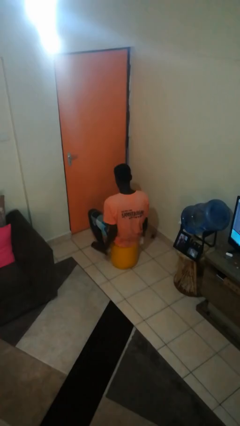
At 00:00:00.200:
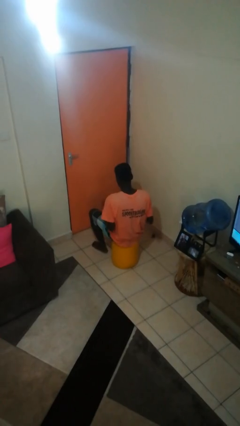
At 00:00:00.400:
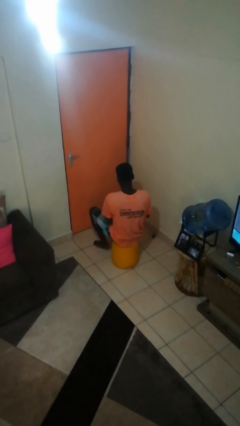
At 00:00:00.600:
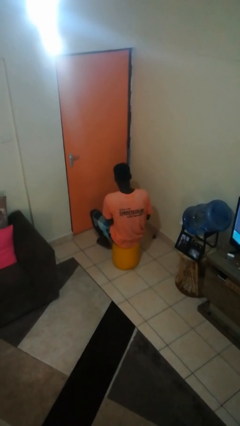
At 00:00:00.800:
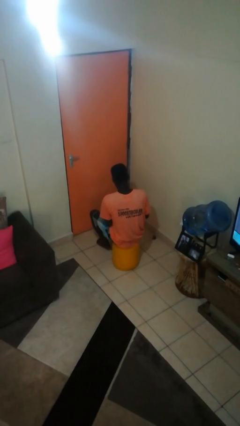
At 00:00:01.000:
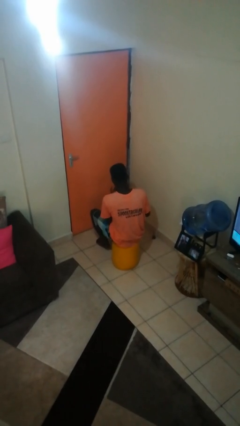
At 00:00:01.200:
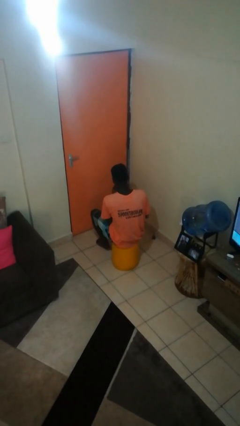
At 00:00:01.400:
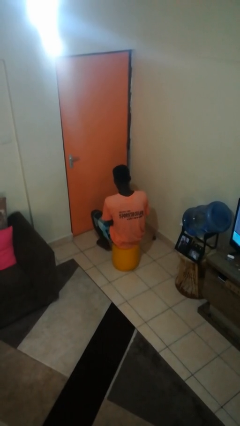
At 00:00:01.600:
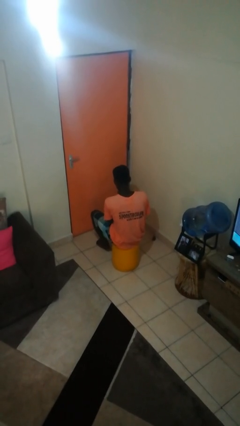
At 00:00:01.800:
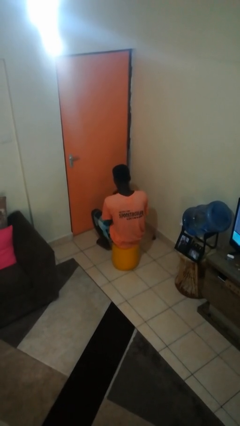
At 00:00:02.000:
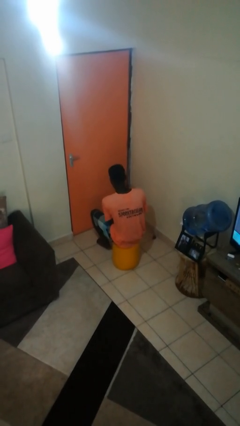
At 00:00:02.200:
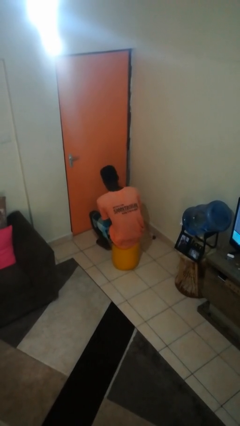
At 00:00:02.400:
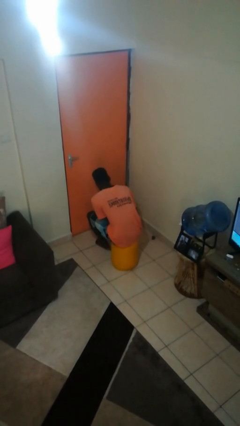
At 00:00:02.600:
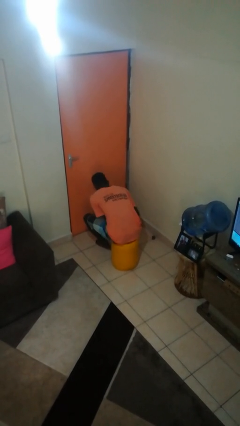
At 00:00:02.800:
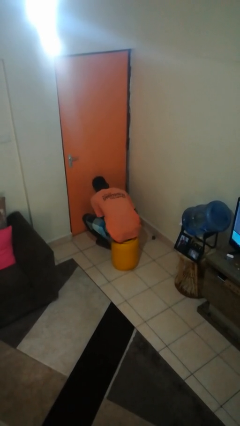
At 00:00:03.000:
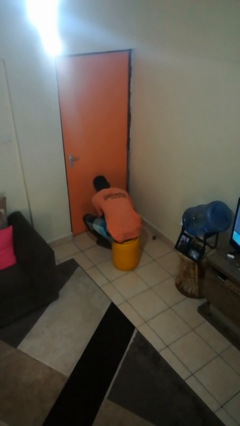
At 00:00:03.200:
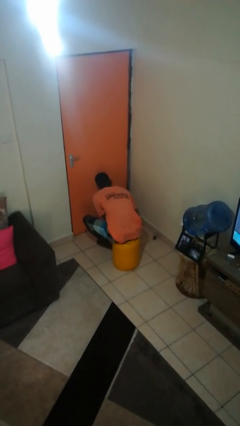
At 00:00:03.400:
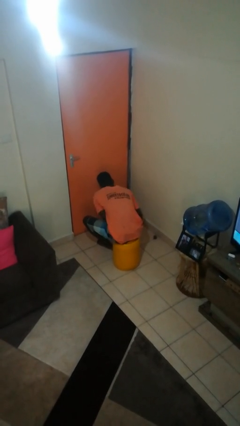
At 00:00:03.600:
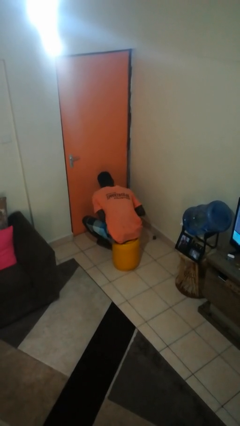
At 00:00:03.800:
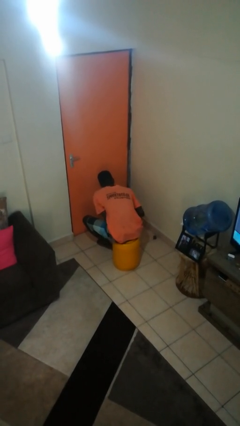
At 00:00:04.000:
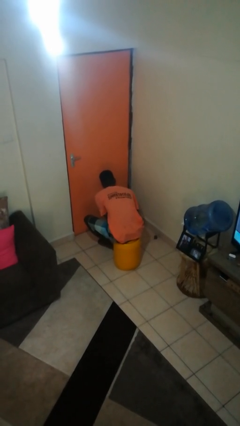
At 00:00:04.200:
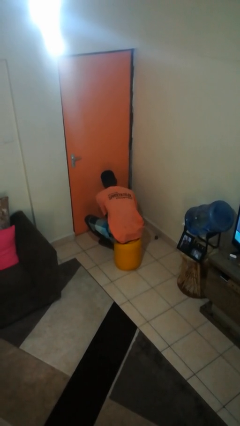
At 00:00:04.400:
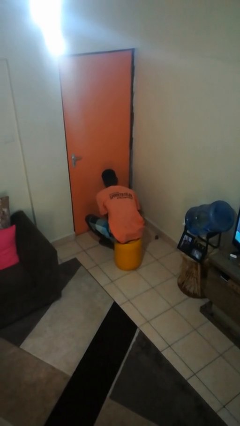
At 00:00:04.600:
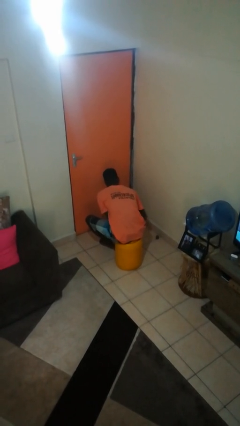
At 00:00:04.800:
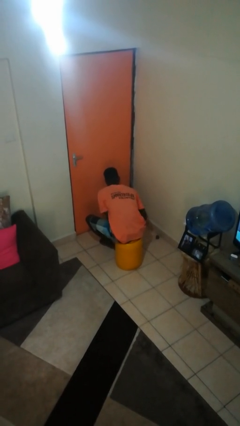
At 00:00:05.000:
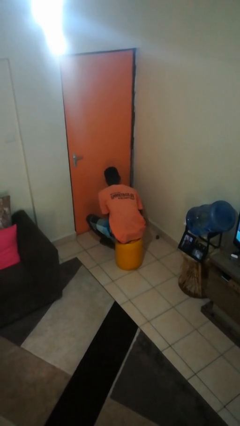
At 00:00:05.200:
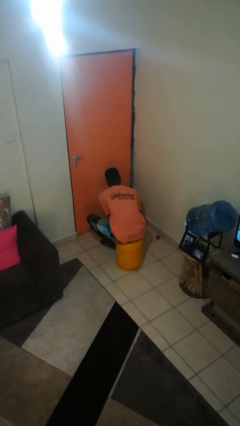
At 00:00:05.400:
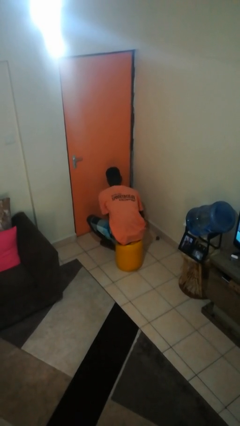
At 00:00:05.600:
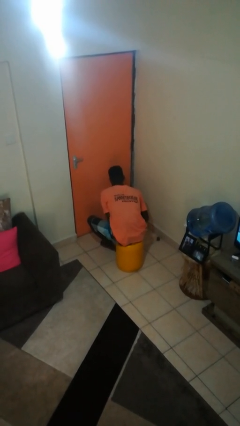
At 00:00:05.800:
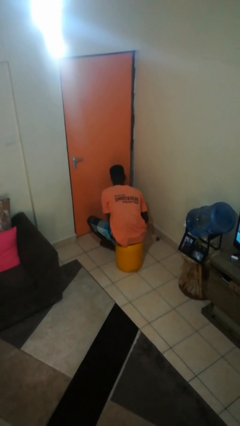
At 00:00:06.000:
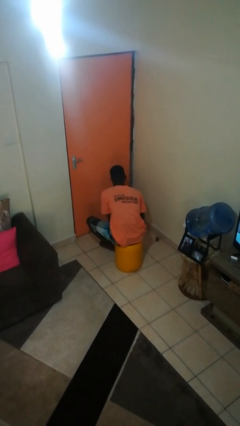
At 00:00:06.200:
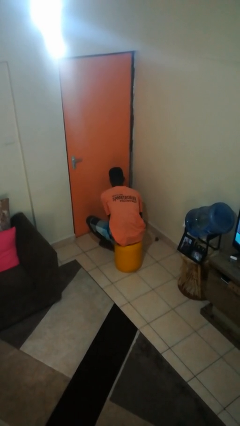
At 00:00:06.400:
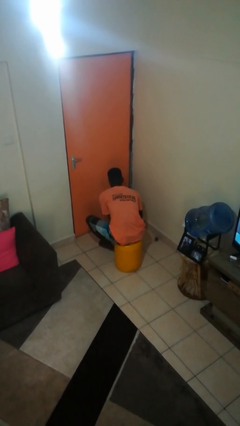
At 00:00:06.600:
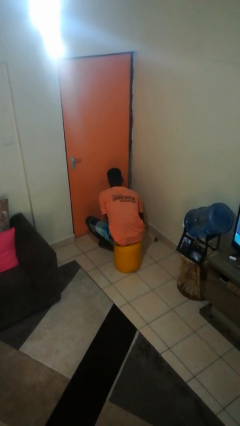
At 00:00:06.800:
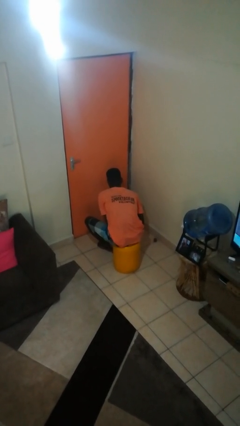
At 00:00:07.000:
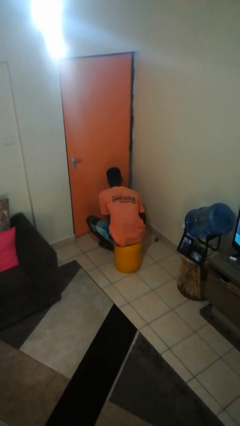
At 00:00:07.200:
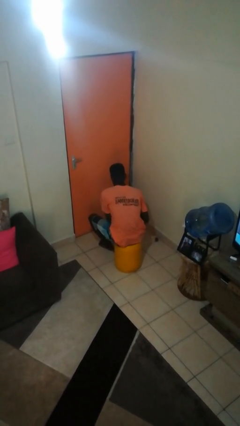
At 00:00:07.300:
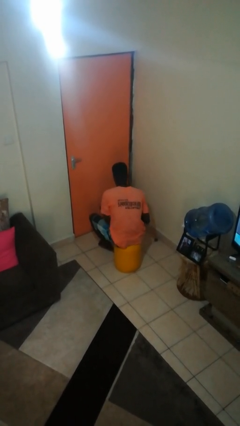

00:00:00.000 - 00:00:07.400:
person applies sunscreen

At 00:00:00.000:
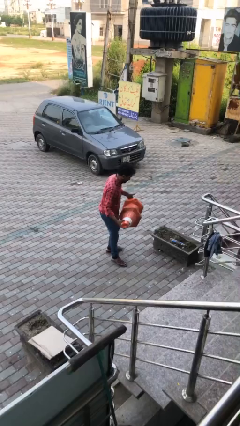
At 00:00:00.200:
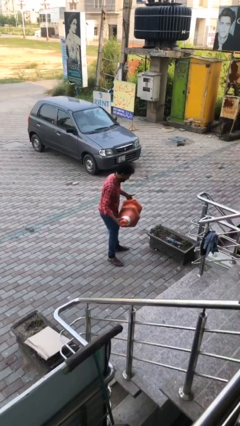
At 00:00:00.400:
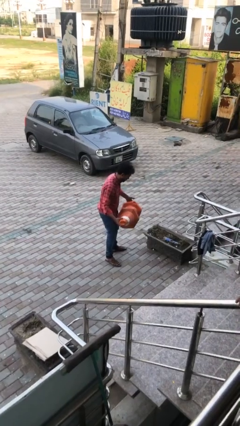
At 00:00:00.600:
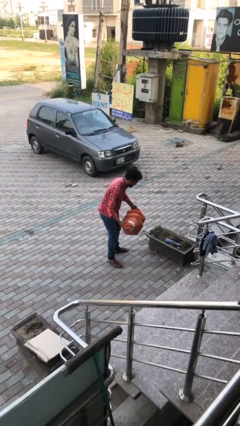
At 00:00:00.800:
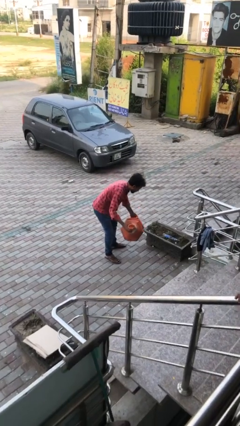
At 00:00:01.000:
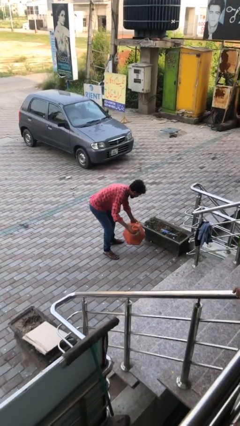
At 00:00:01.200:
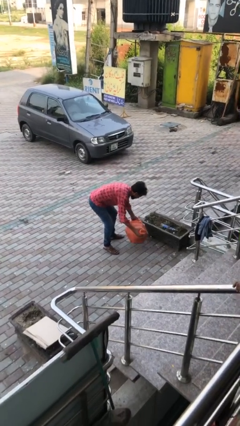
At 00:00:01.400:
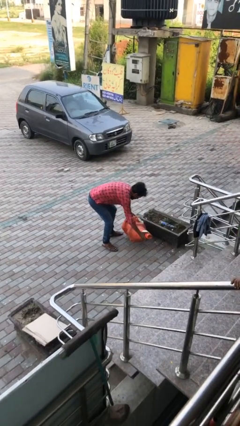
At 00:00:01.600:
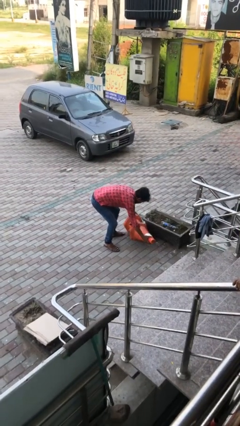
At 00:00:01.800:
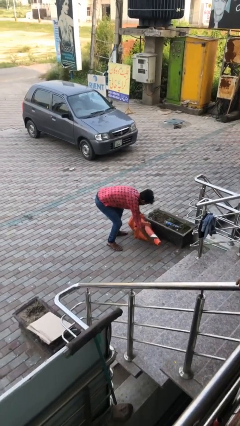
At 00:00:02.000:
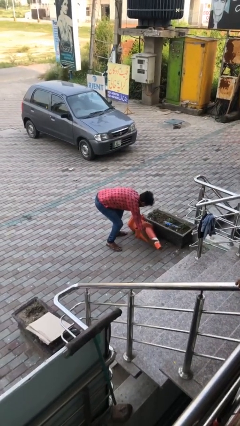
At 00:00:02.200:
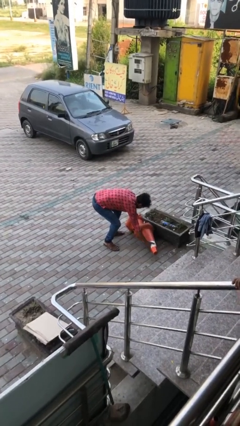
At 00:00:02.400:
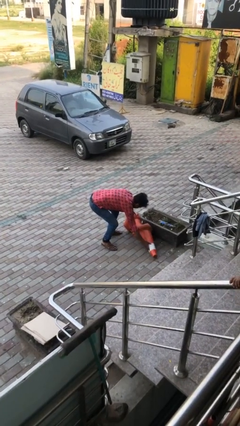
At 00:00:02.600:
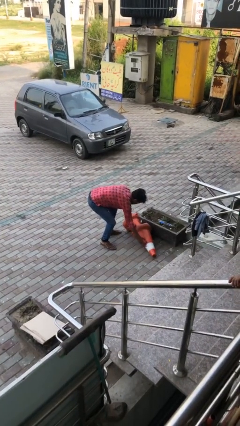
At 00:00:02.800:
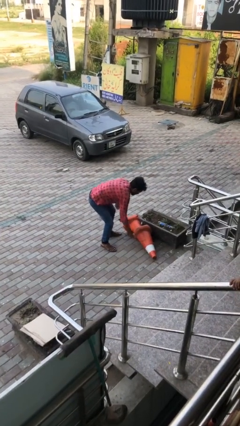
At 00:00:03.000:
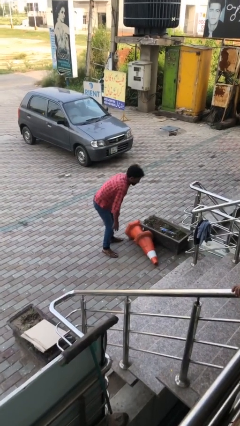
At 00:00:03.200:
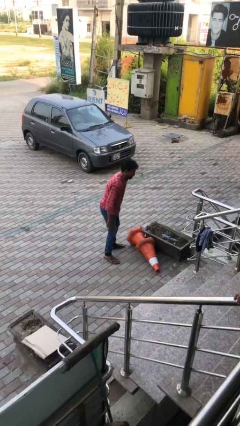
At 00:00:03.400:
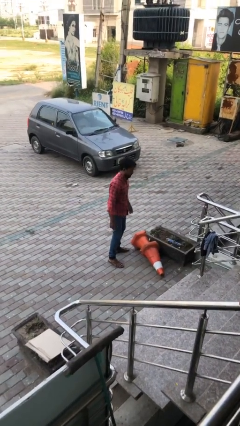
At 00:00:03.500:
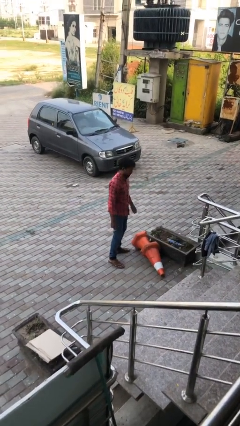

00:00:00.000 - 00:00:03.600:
person puts down object on floor

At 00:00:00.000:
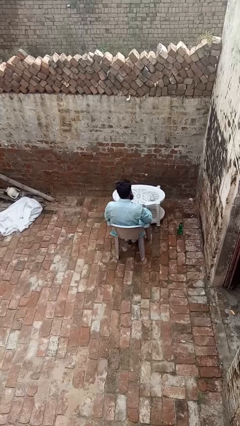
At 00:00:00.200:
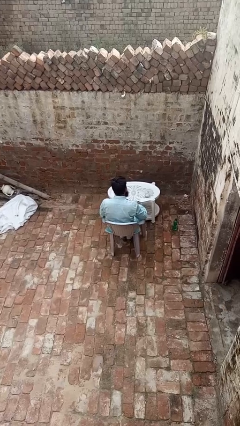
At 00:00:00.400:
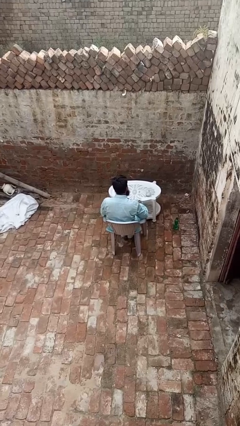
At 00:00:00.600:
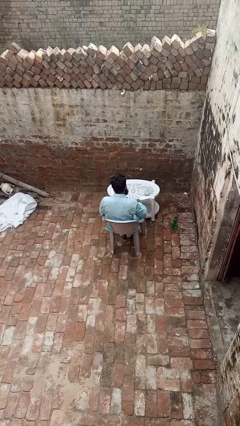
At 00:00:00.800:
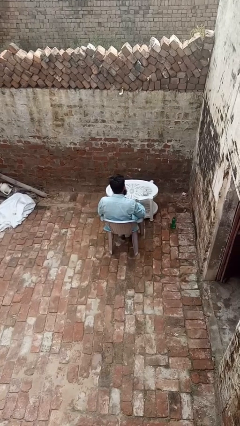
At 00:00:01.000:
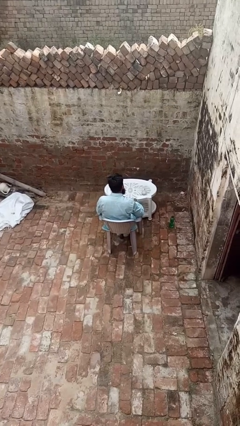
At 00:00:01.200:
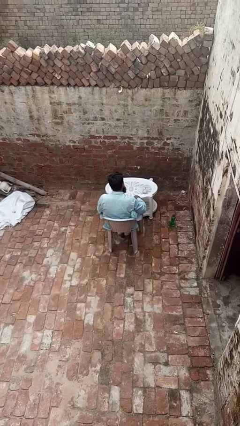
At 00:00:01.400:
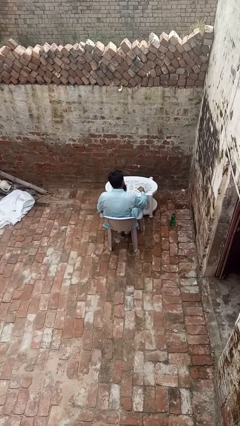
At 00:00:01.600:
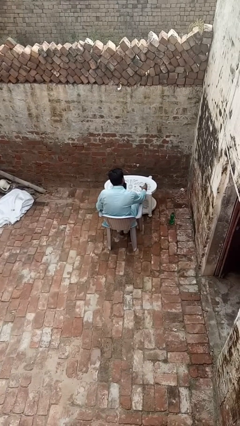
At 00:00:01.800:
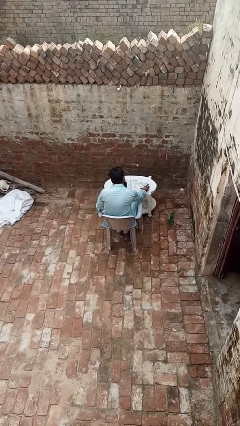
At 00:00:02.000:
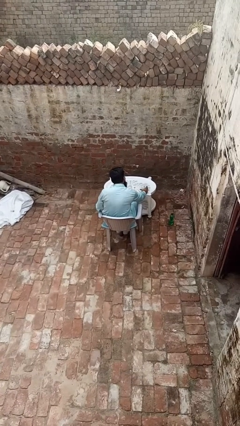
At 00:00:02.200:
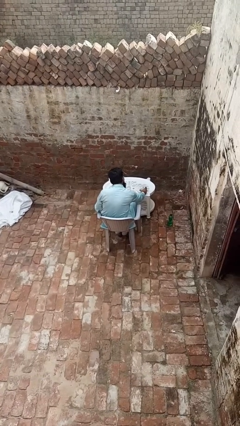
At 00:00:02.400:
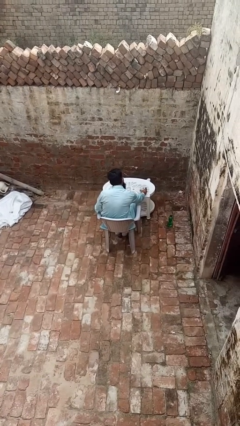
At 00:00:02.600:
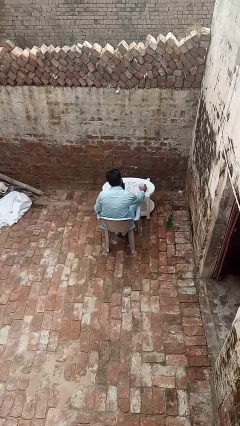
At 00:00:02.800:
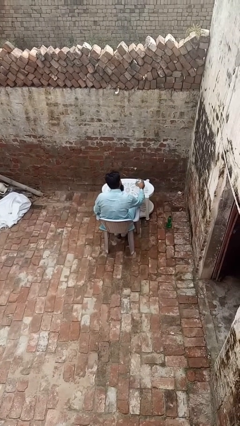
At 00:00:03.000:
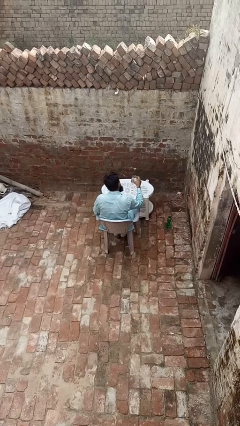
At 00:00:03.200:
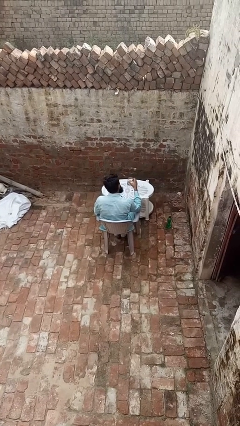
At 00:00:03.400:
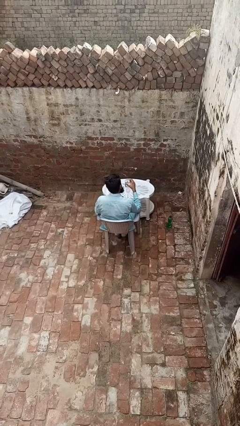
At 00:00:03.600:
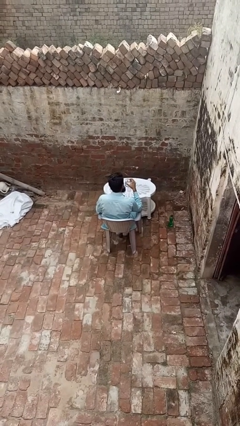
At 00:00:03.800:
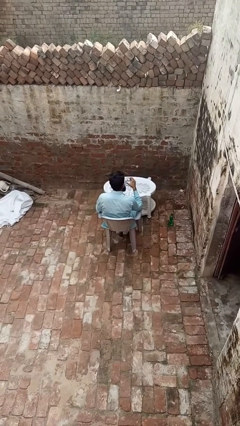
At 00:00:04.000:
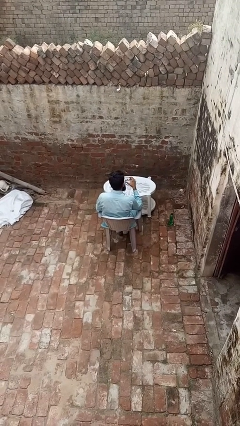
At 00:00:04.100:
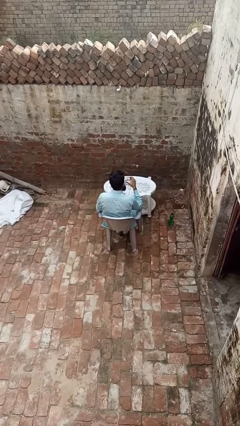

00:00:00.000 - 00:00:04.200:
person picks up object from table

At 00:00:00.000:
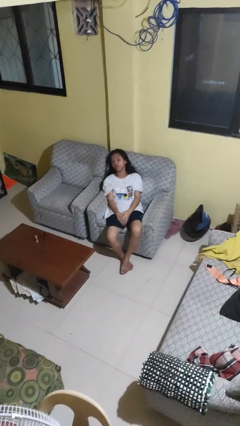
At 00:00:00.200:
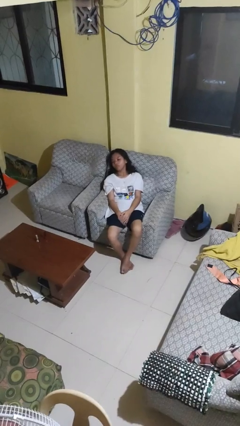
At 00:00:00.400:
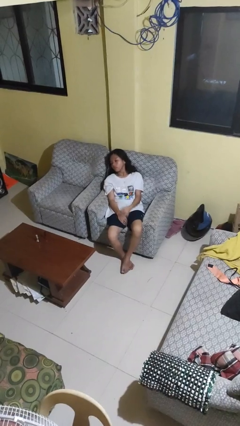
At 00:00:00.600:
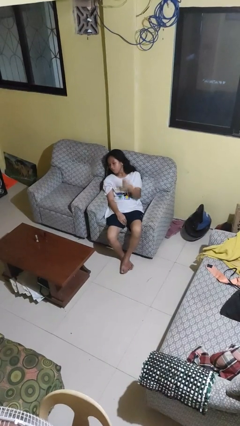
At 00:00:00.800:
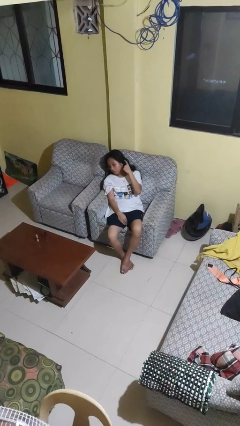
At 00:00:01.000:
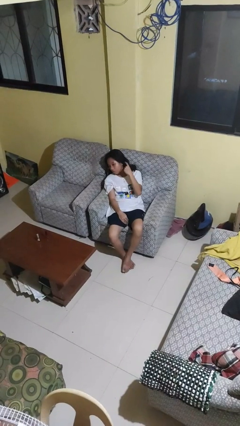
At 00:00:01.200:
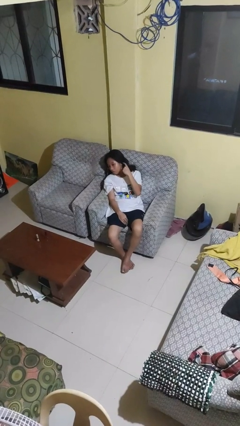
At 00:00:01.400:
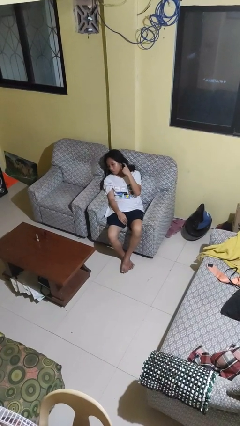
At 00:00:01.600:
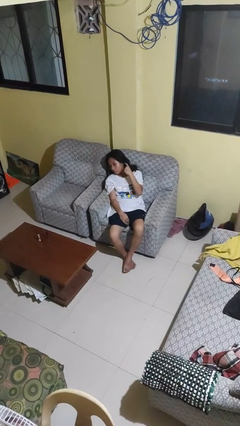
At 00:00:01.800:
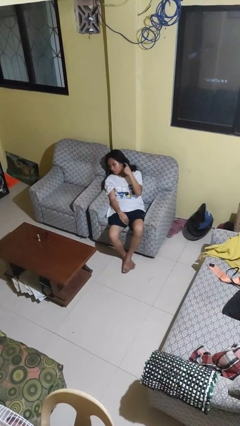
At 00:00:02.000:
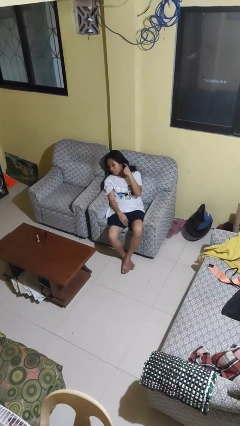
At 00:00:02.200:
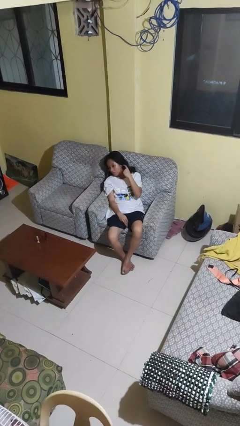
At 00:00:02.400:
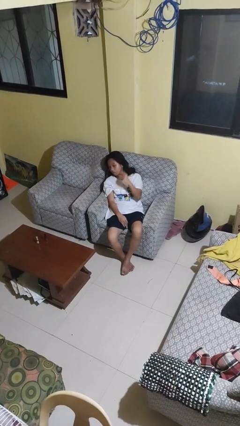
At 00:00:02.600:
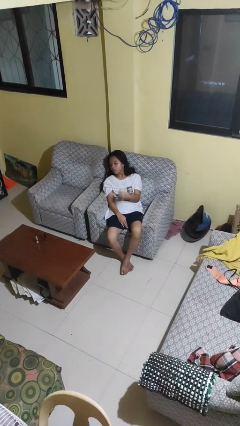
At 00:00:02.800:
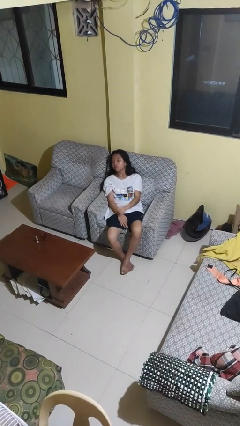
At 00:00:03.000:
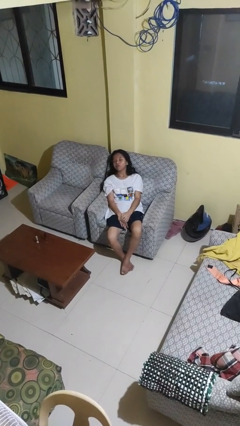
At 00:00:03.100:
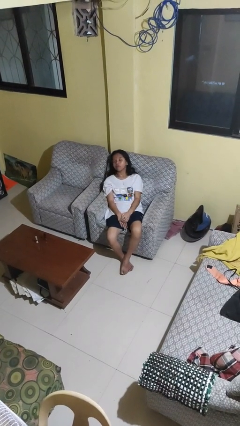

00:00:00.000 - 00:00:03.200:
person gestures listen closely
